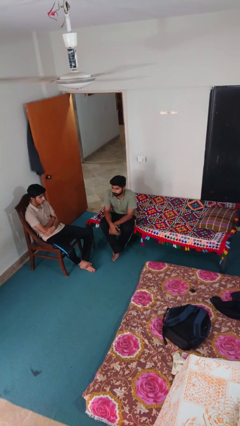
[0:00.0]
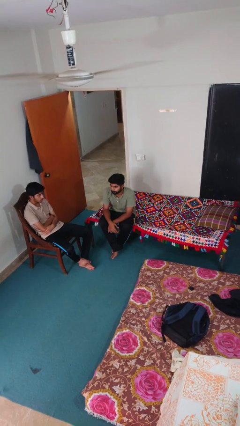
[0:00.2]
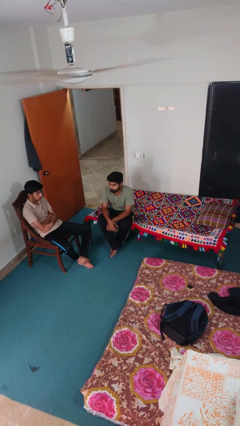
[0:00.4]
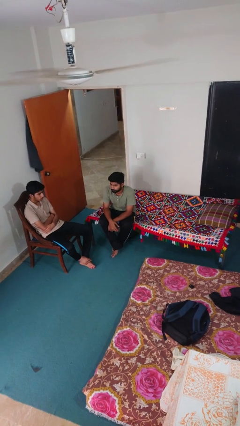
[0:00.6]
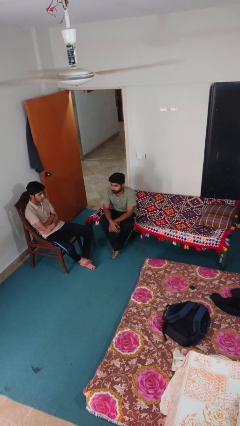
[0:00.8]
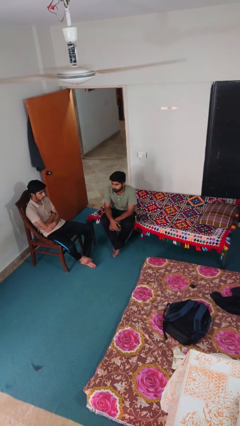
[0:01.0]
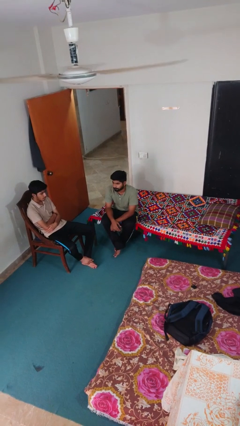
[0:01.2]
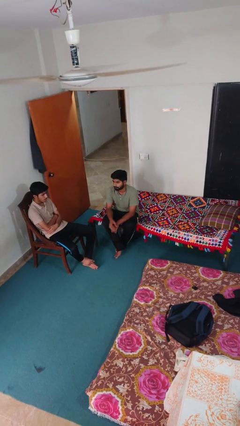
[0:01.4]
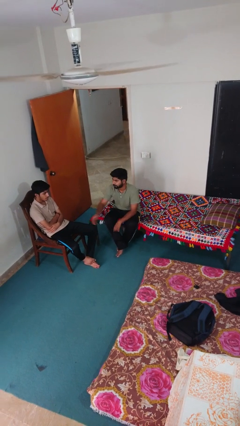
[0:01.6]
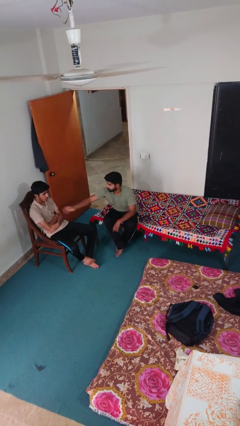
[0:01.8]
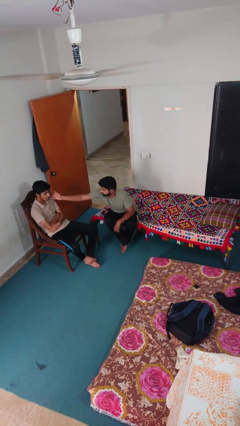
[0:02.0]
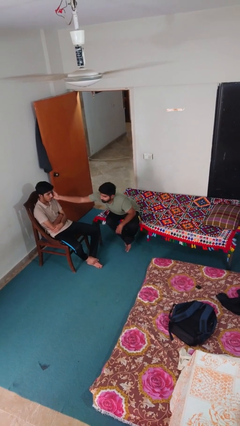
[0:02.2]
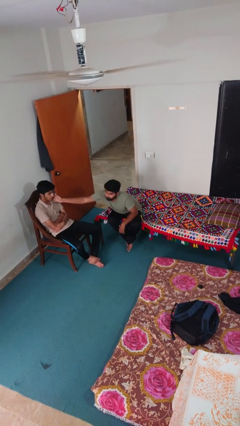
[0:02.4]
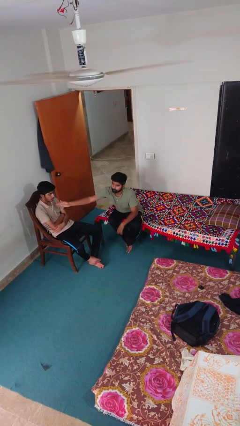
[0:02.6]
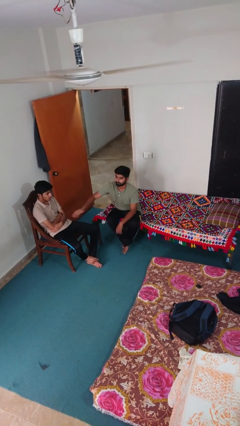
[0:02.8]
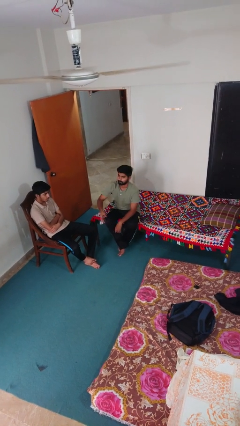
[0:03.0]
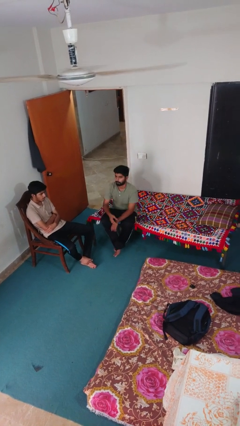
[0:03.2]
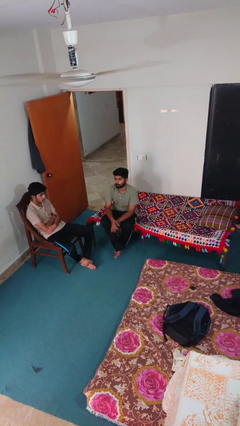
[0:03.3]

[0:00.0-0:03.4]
person touches face of person

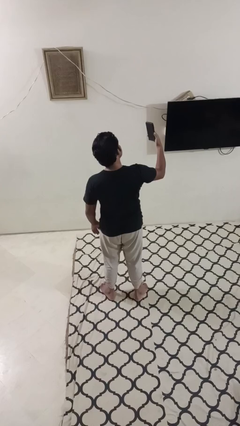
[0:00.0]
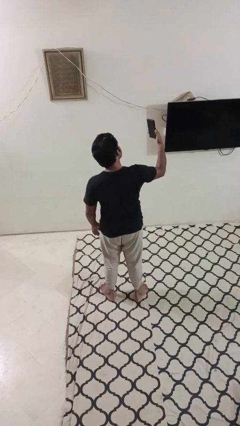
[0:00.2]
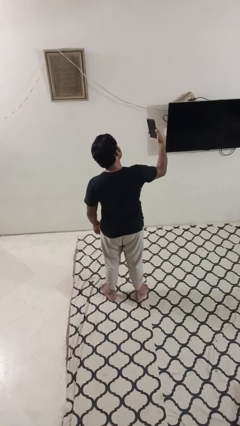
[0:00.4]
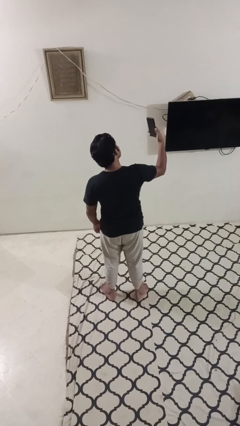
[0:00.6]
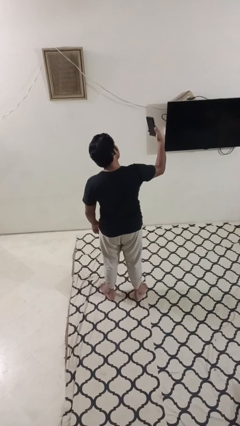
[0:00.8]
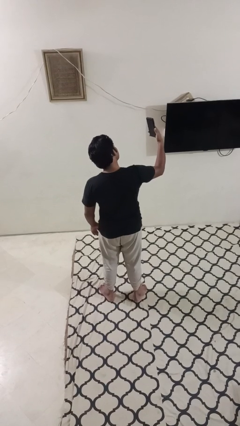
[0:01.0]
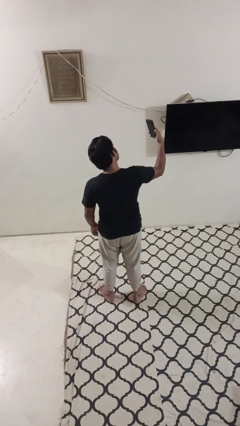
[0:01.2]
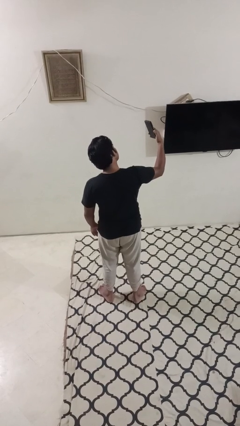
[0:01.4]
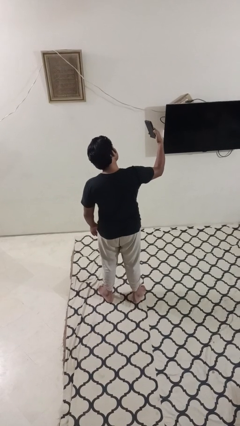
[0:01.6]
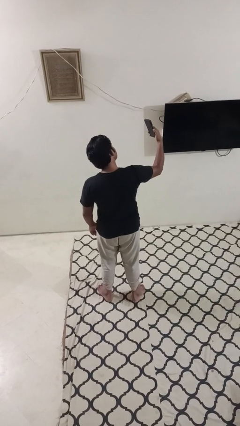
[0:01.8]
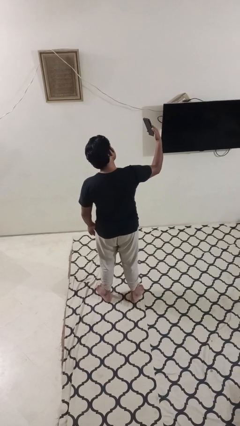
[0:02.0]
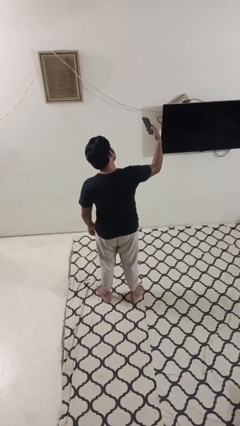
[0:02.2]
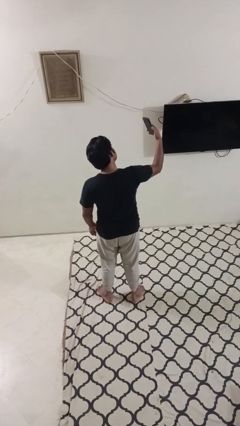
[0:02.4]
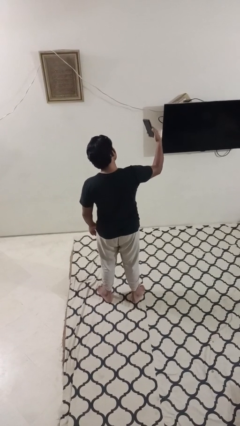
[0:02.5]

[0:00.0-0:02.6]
person takes selfie

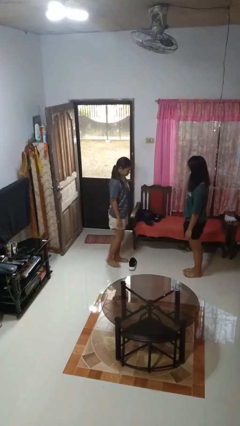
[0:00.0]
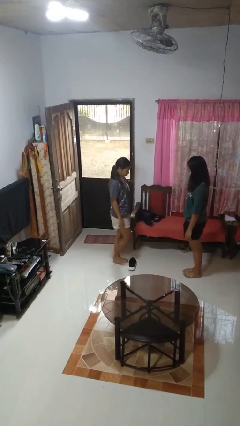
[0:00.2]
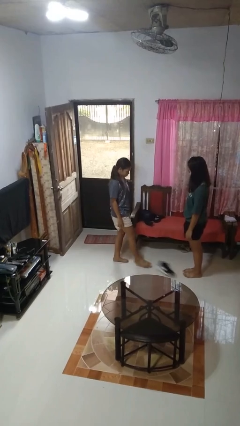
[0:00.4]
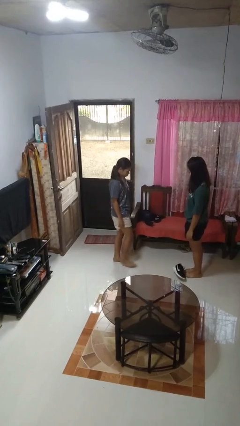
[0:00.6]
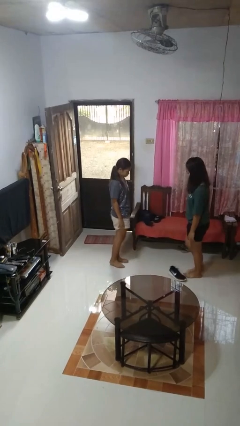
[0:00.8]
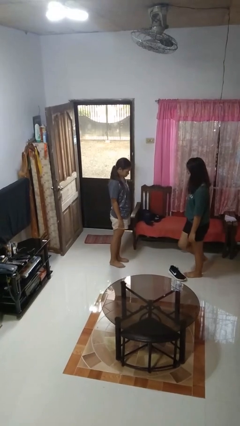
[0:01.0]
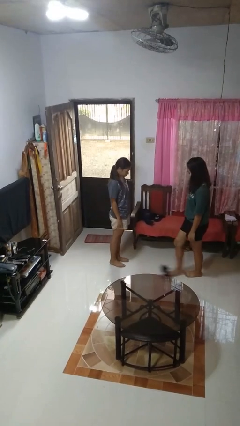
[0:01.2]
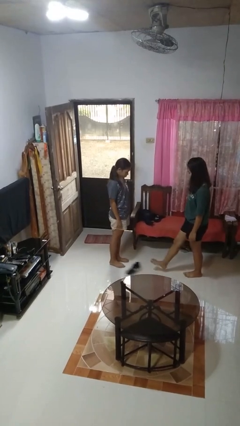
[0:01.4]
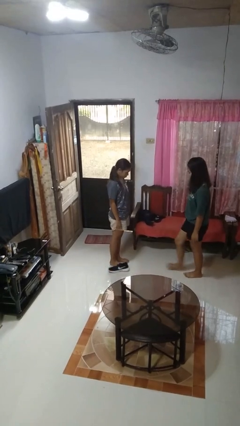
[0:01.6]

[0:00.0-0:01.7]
person kicks object to person

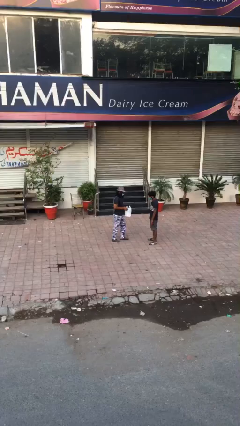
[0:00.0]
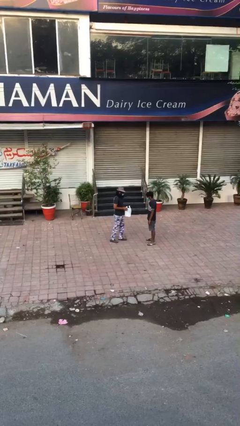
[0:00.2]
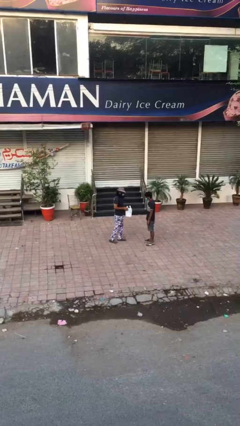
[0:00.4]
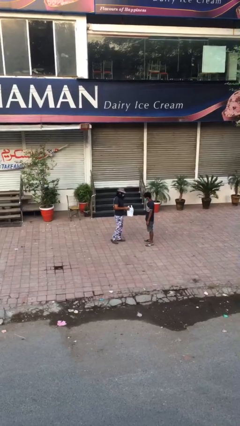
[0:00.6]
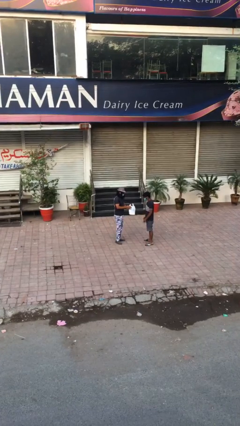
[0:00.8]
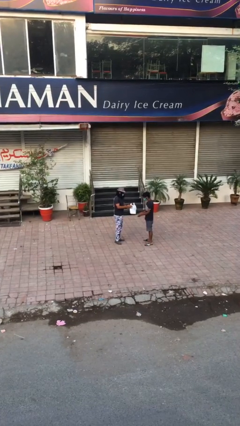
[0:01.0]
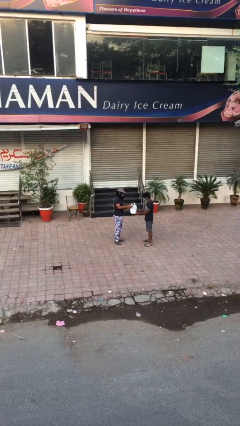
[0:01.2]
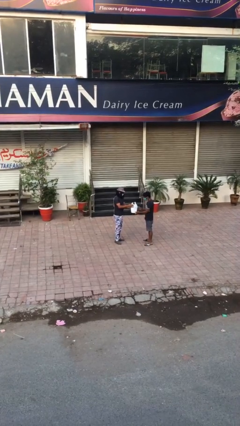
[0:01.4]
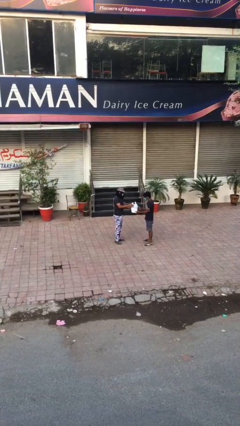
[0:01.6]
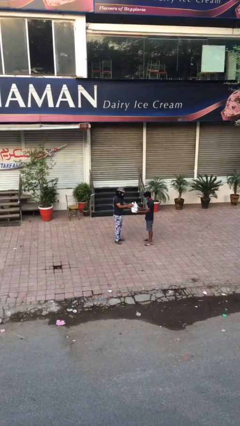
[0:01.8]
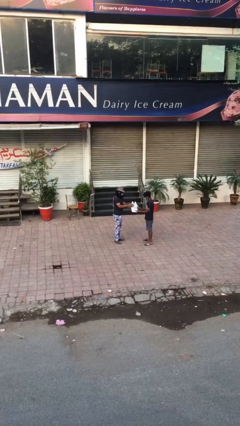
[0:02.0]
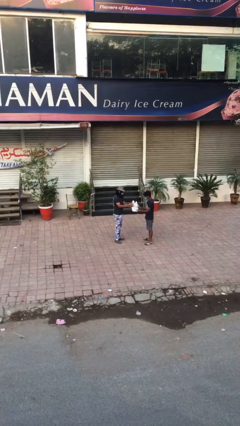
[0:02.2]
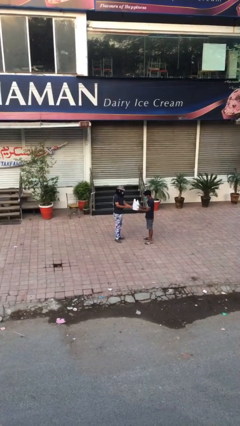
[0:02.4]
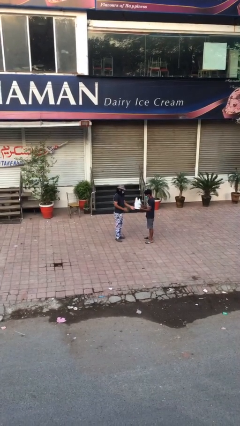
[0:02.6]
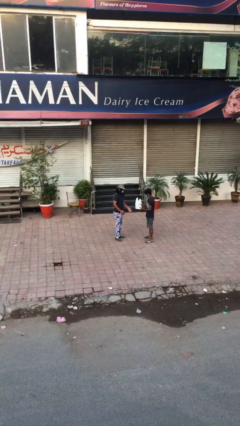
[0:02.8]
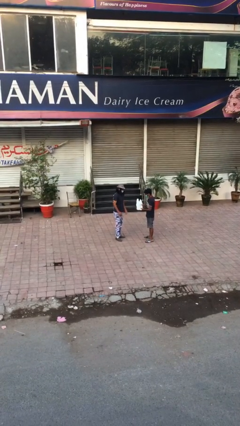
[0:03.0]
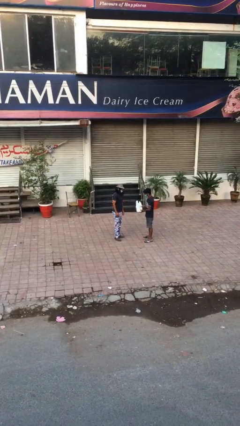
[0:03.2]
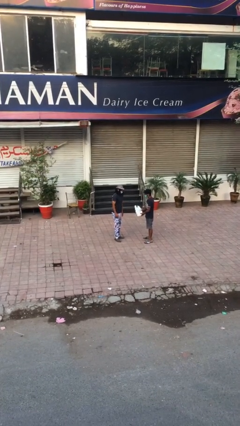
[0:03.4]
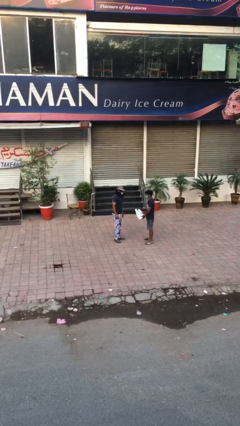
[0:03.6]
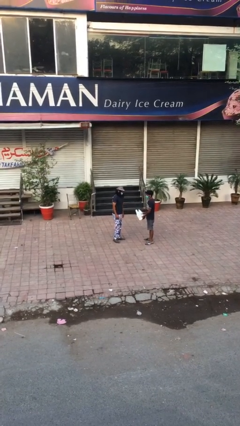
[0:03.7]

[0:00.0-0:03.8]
person transfers object to person

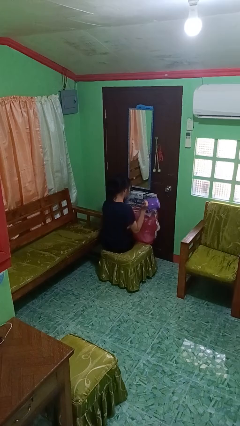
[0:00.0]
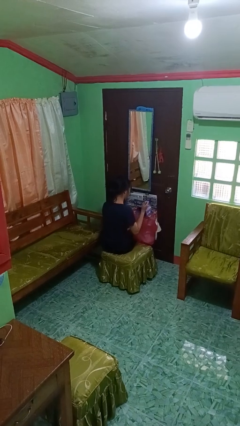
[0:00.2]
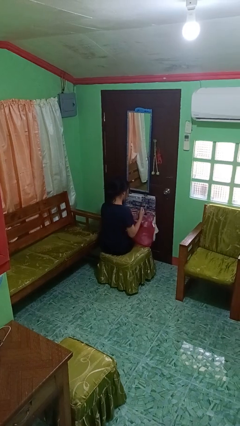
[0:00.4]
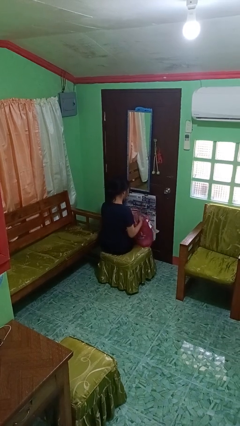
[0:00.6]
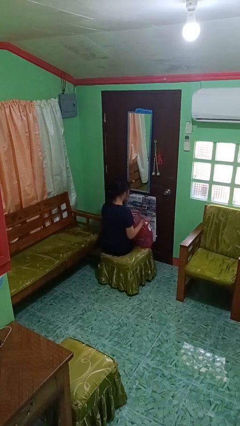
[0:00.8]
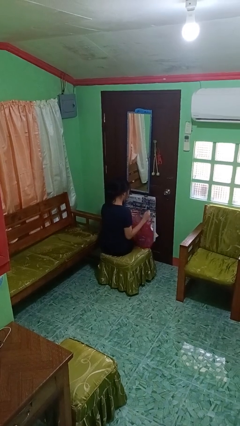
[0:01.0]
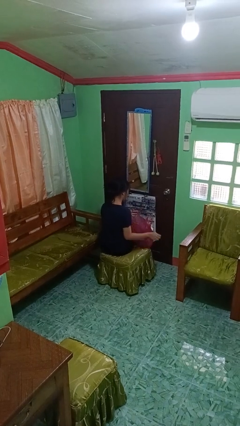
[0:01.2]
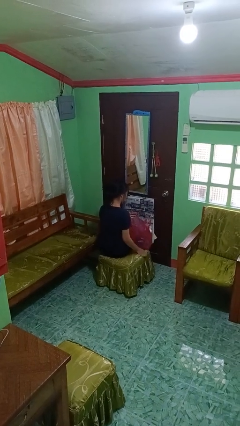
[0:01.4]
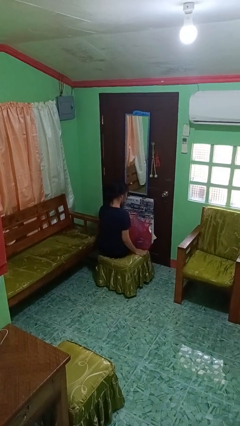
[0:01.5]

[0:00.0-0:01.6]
person puts object into bag

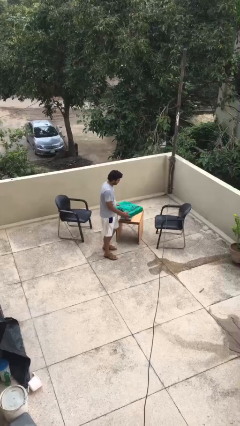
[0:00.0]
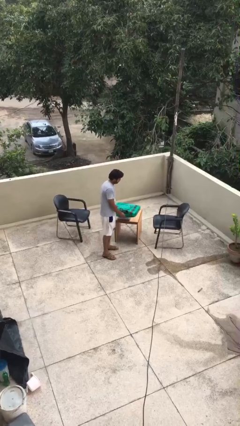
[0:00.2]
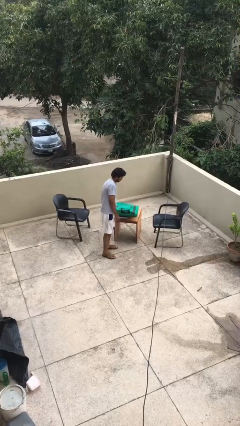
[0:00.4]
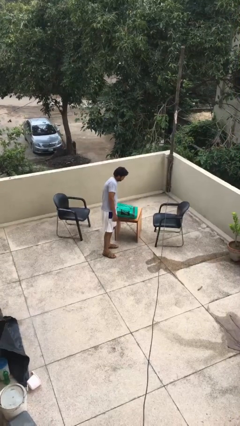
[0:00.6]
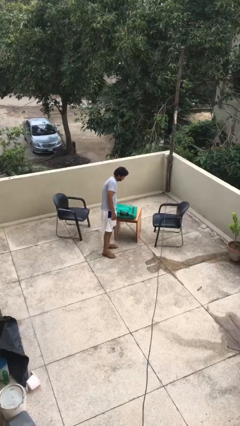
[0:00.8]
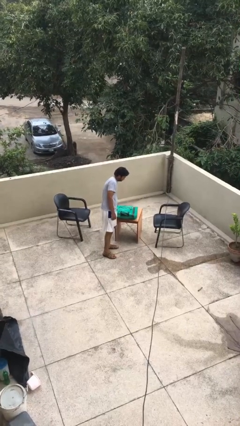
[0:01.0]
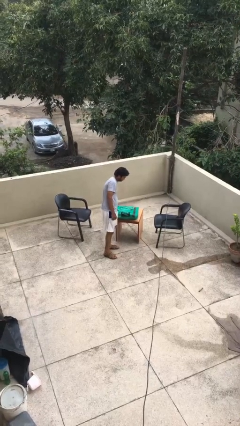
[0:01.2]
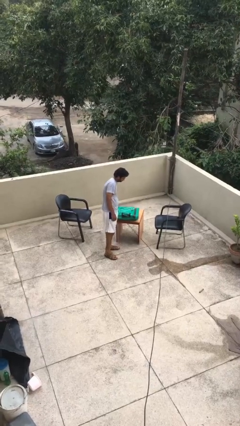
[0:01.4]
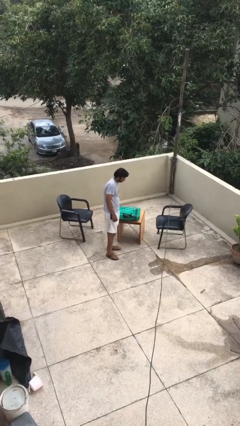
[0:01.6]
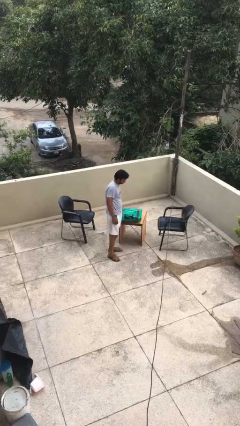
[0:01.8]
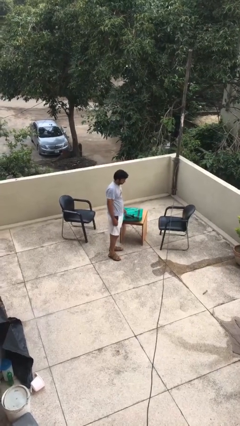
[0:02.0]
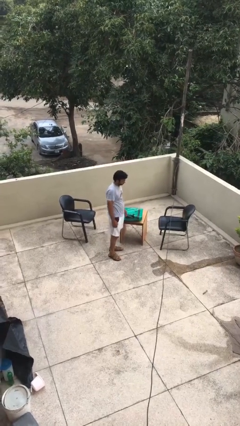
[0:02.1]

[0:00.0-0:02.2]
person puts down object on table

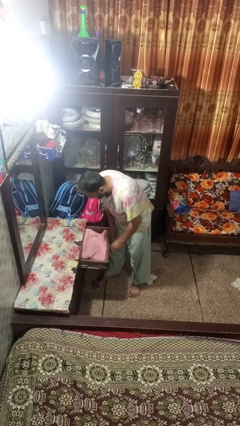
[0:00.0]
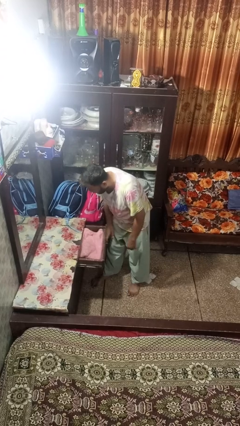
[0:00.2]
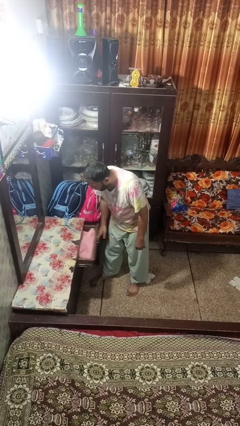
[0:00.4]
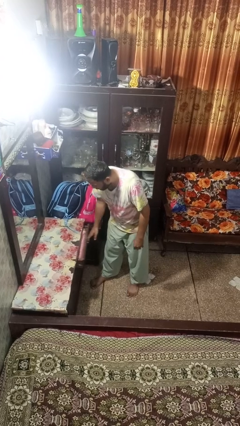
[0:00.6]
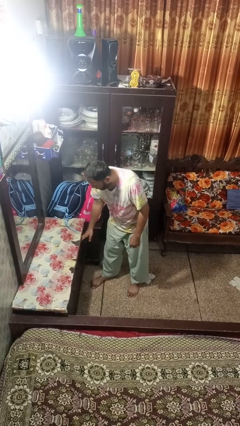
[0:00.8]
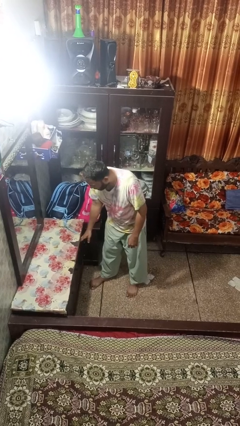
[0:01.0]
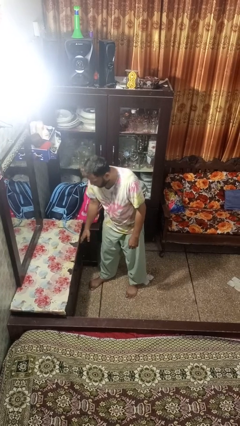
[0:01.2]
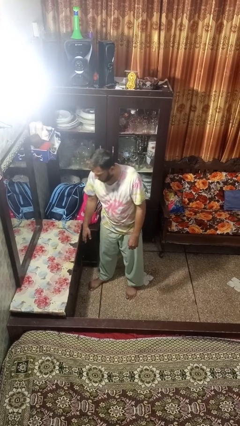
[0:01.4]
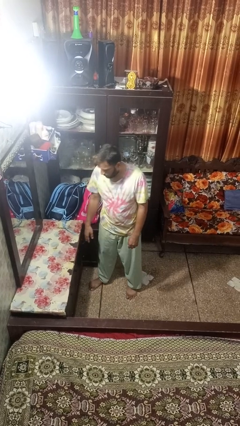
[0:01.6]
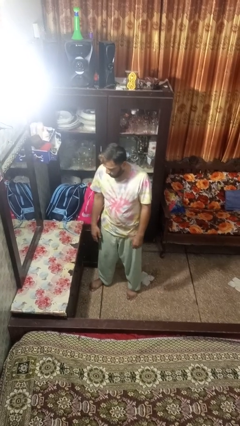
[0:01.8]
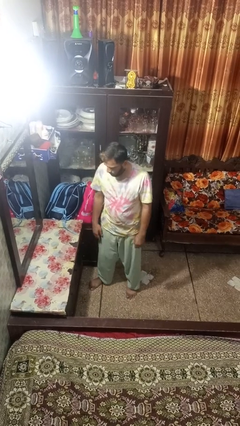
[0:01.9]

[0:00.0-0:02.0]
person closes dresser drawer
